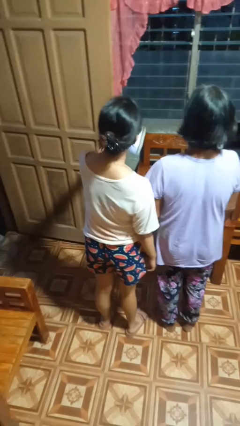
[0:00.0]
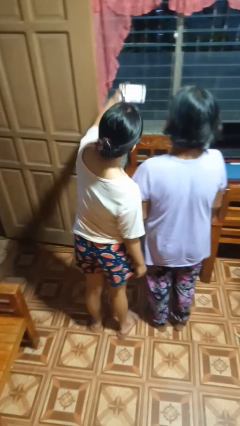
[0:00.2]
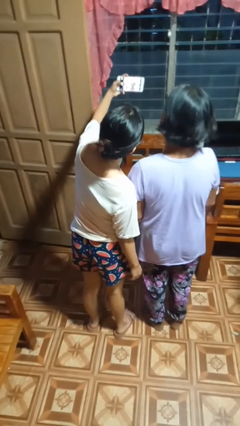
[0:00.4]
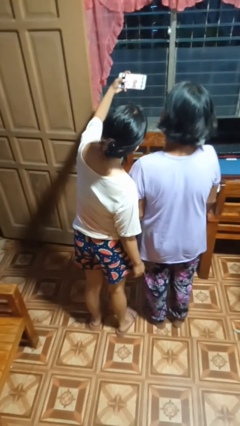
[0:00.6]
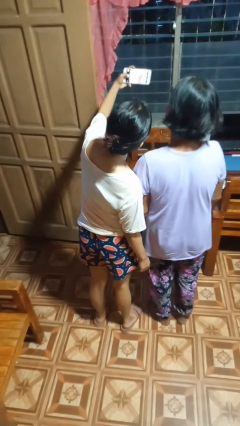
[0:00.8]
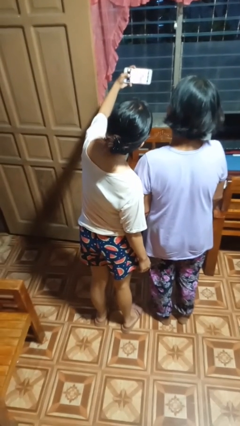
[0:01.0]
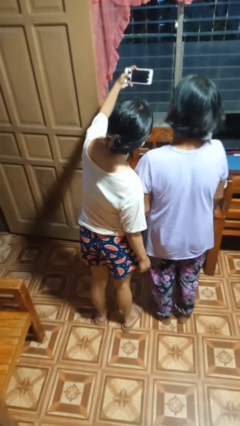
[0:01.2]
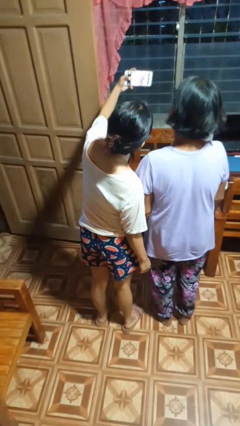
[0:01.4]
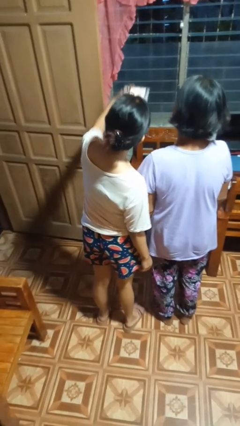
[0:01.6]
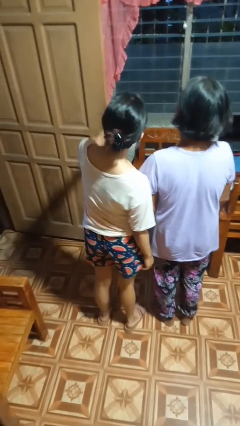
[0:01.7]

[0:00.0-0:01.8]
person takes selfie with person

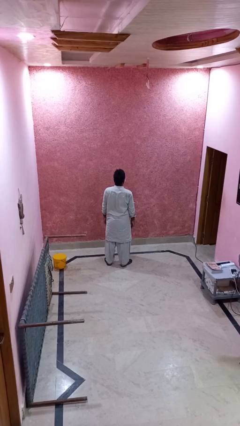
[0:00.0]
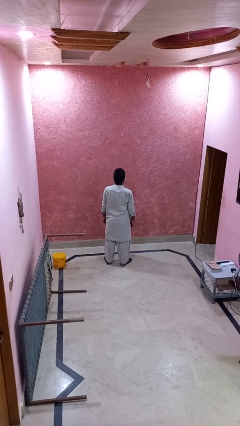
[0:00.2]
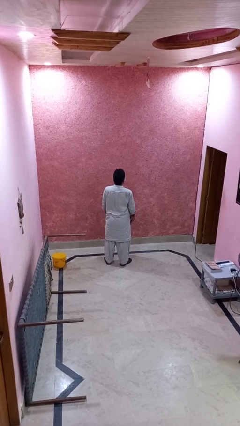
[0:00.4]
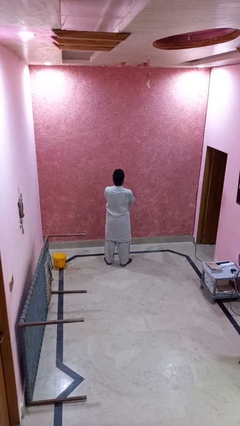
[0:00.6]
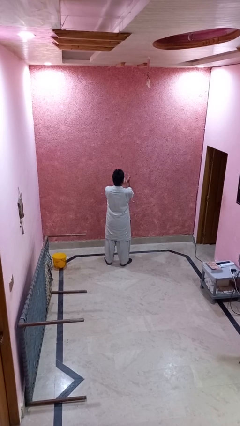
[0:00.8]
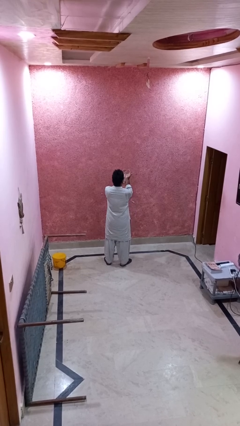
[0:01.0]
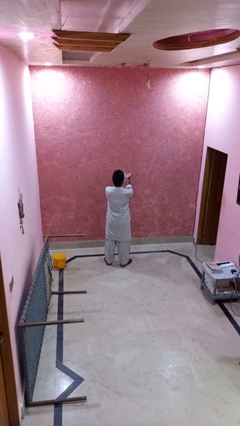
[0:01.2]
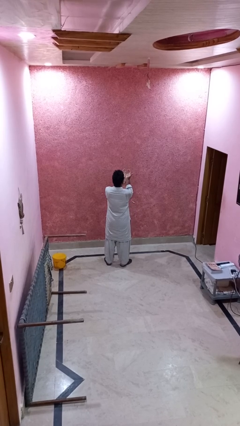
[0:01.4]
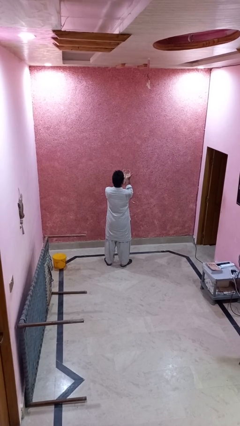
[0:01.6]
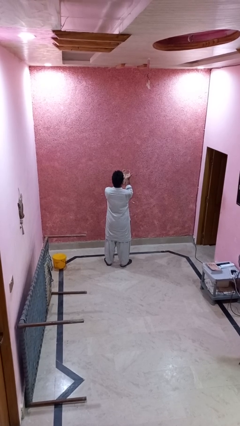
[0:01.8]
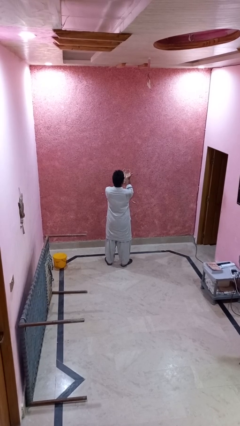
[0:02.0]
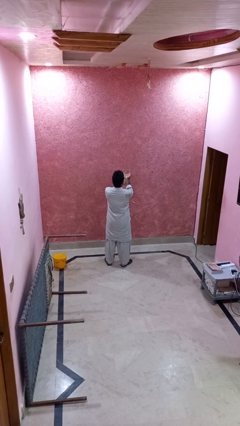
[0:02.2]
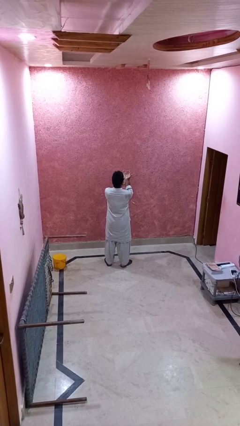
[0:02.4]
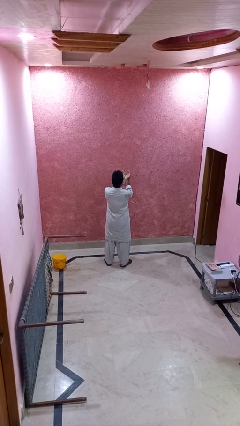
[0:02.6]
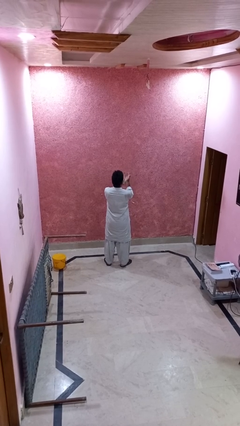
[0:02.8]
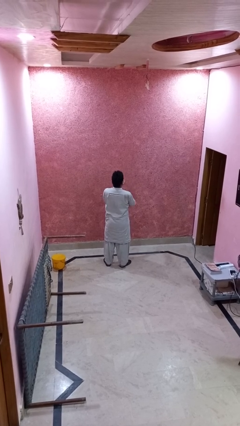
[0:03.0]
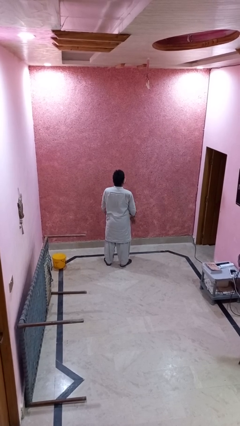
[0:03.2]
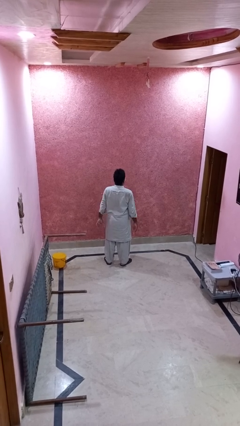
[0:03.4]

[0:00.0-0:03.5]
person prays

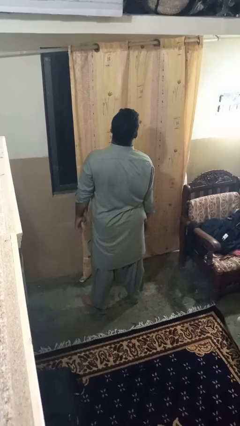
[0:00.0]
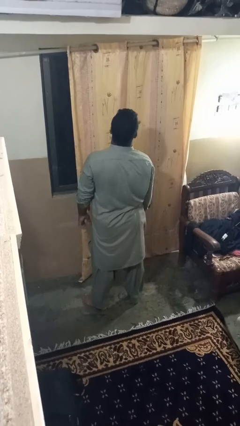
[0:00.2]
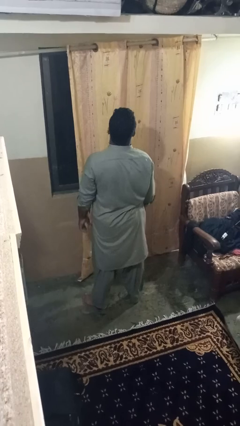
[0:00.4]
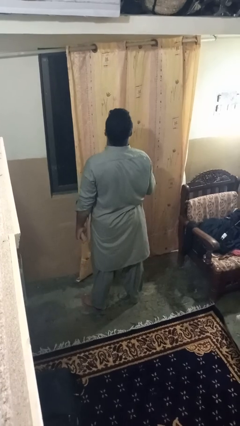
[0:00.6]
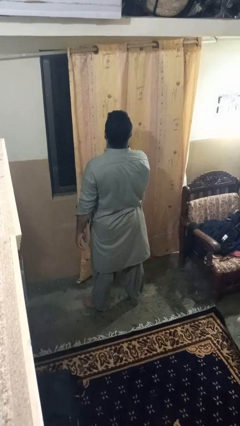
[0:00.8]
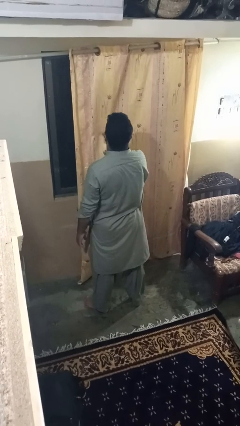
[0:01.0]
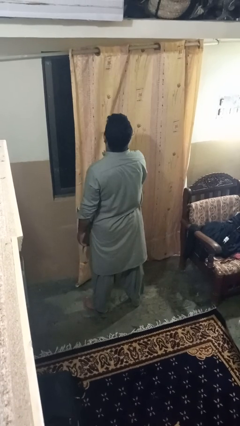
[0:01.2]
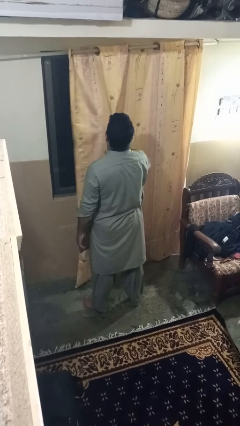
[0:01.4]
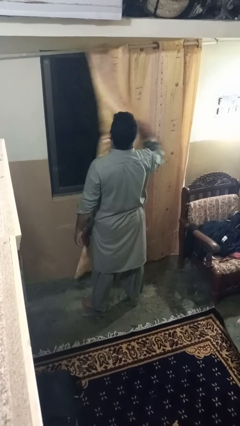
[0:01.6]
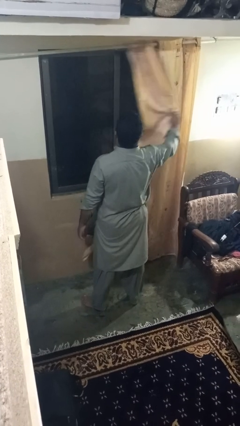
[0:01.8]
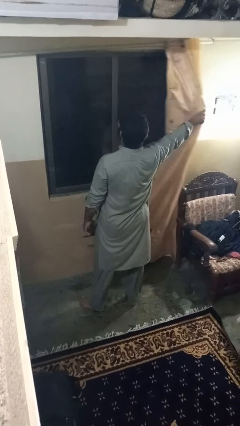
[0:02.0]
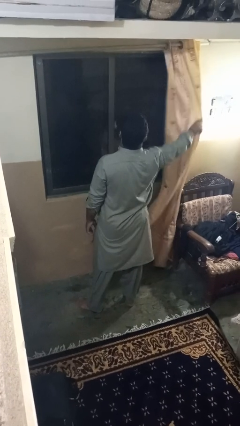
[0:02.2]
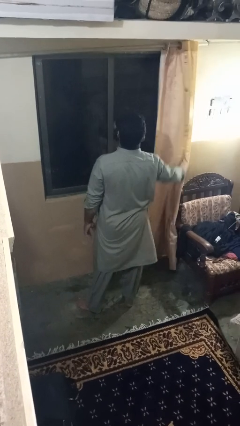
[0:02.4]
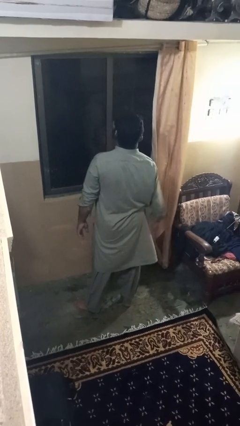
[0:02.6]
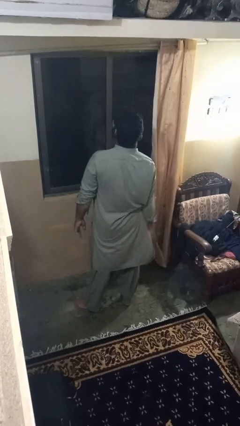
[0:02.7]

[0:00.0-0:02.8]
person opens curtains

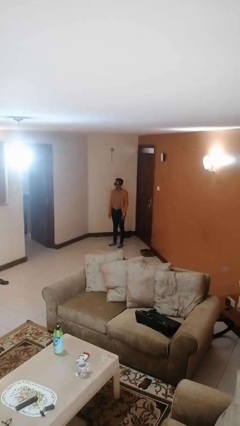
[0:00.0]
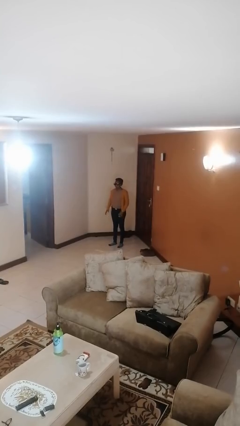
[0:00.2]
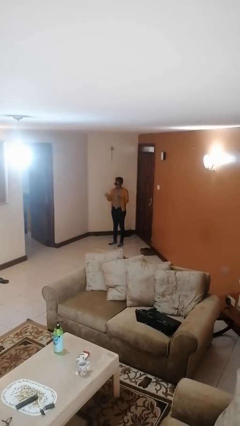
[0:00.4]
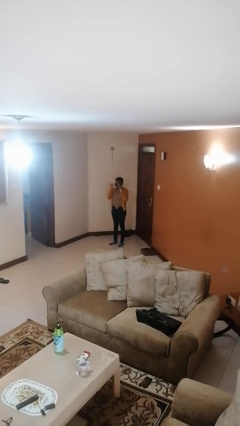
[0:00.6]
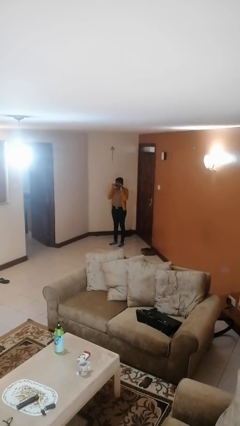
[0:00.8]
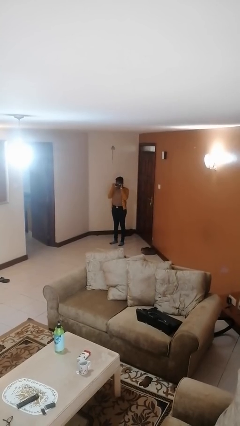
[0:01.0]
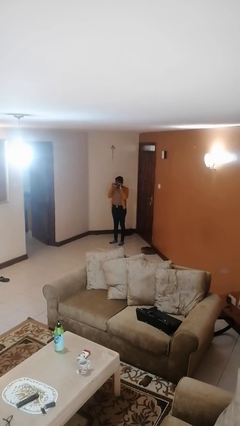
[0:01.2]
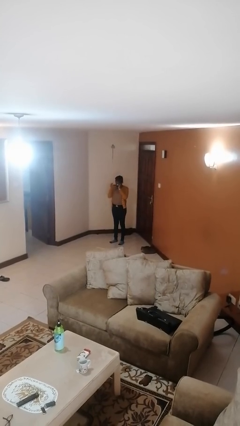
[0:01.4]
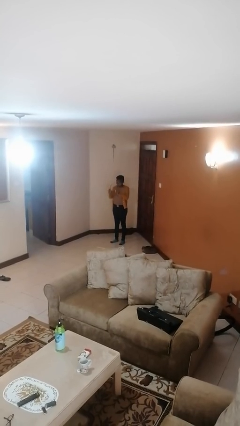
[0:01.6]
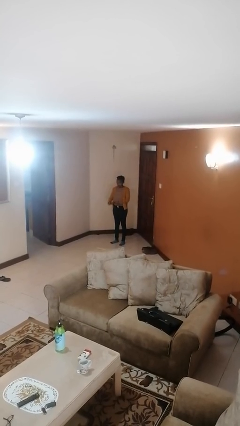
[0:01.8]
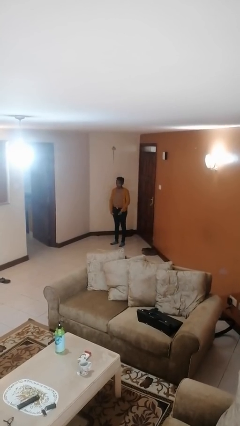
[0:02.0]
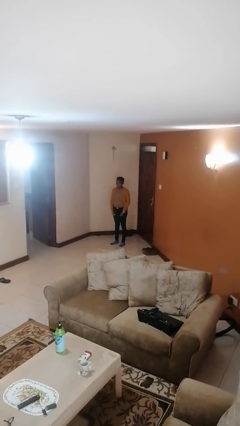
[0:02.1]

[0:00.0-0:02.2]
person takes off sunglasses

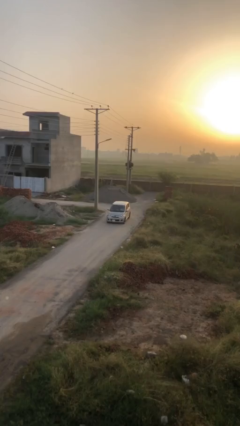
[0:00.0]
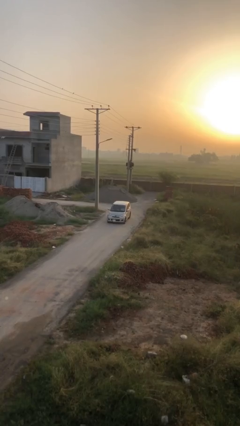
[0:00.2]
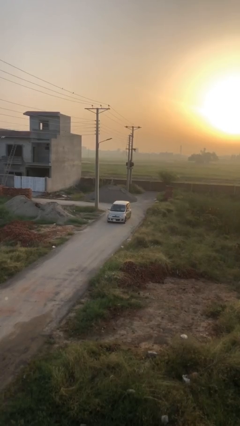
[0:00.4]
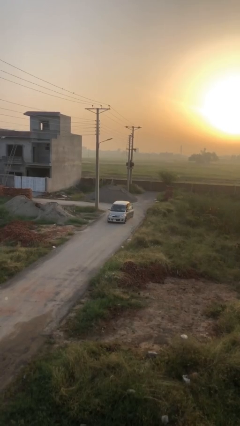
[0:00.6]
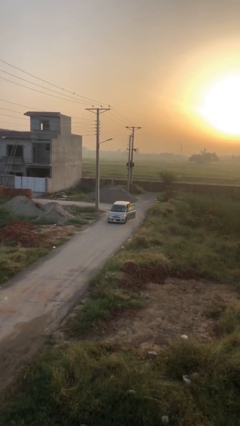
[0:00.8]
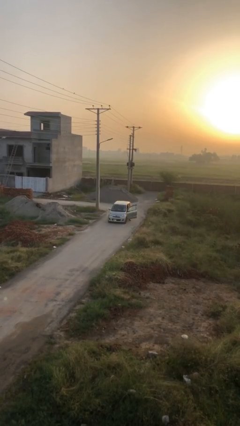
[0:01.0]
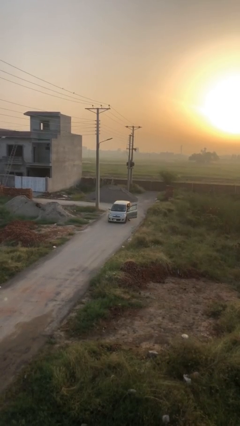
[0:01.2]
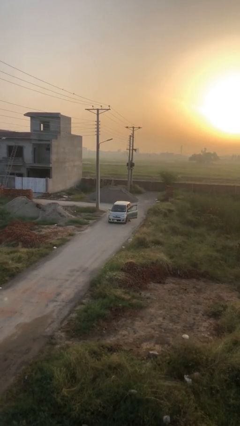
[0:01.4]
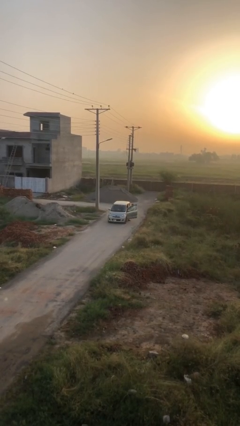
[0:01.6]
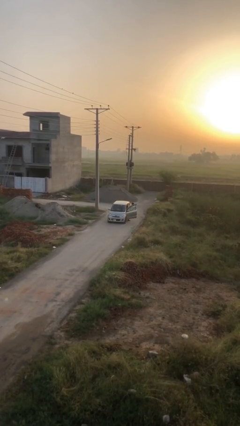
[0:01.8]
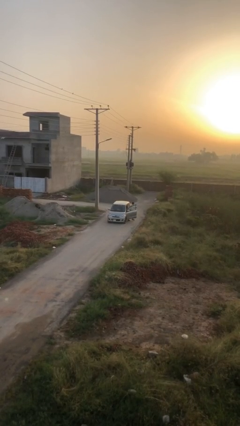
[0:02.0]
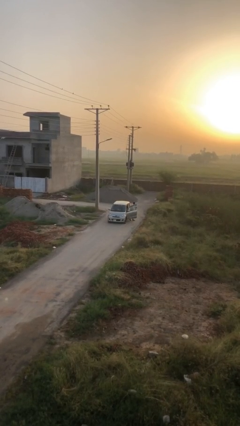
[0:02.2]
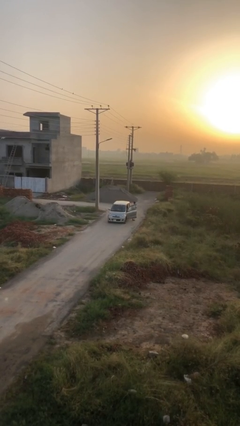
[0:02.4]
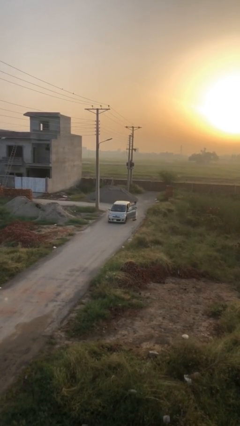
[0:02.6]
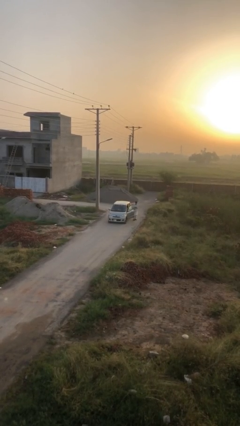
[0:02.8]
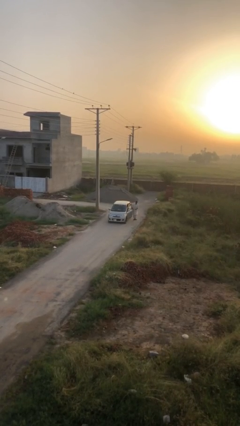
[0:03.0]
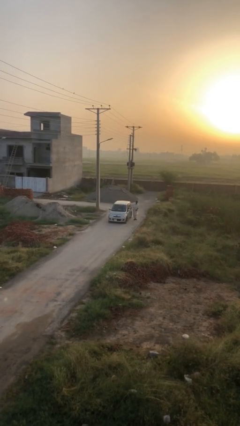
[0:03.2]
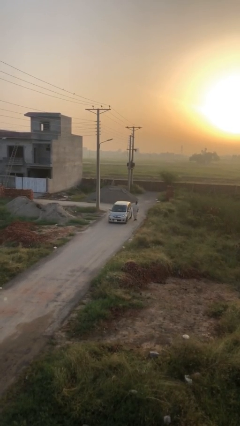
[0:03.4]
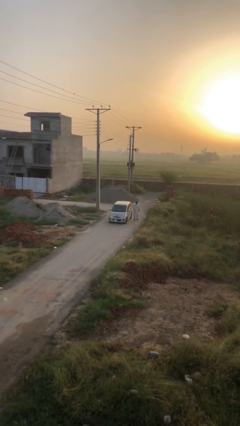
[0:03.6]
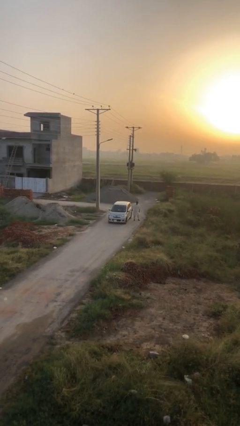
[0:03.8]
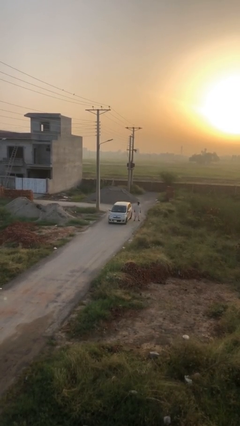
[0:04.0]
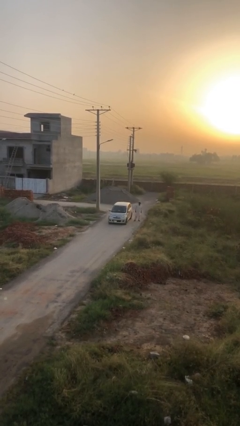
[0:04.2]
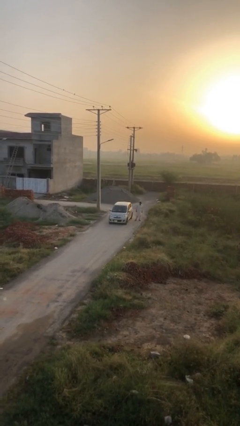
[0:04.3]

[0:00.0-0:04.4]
car drops off person

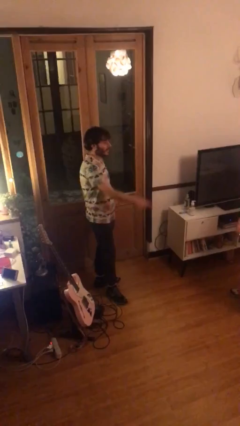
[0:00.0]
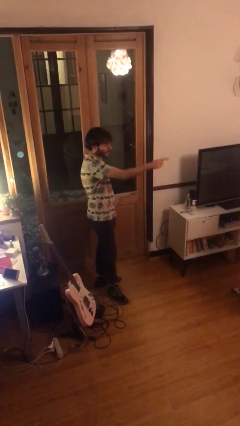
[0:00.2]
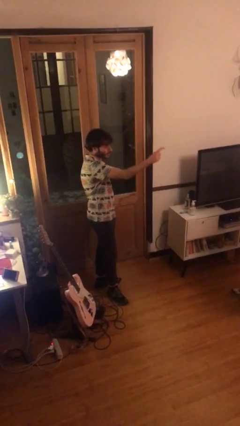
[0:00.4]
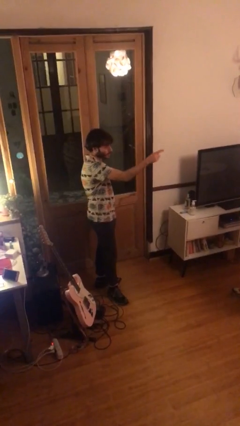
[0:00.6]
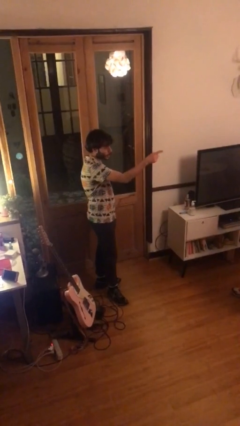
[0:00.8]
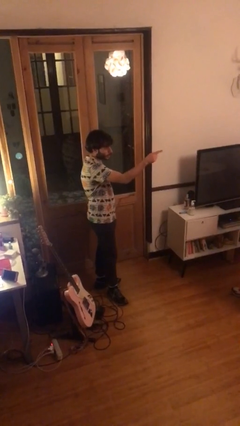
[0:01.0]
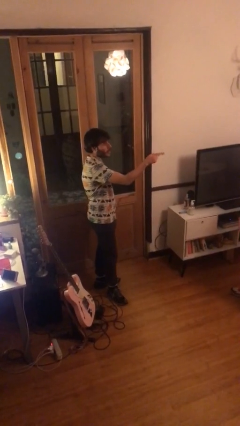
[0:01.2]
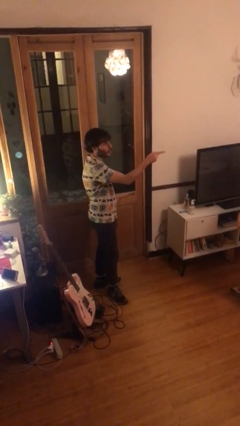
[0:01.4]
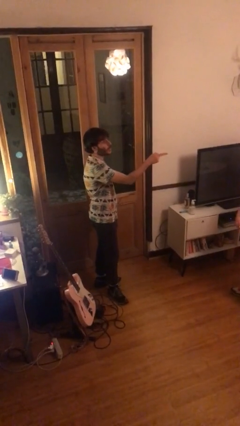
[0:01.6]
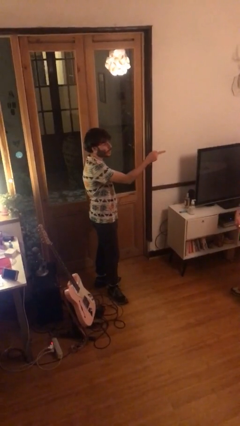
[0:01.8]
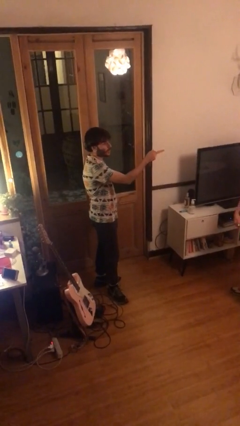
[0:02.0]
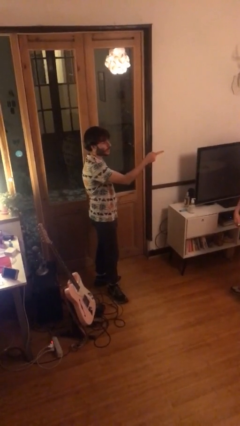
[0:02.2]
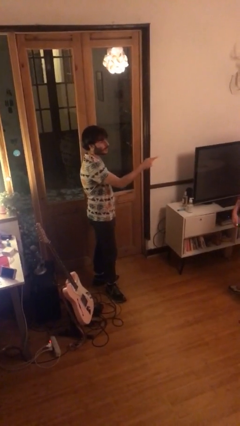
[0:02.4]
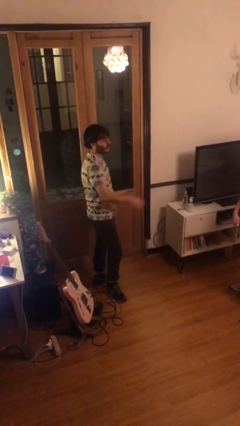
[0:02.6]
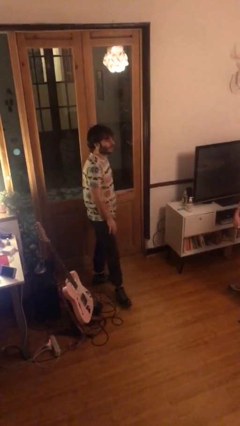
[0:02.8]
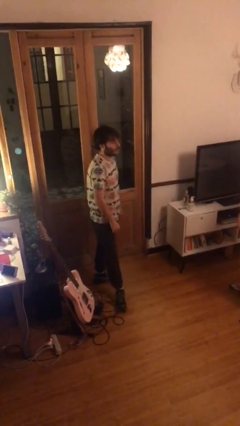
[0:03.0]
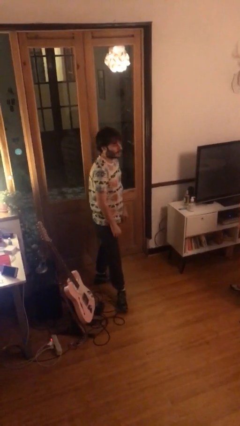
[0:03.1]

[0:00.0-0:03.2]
person points at person
